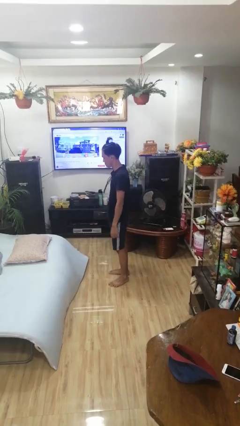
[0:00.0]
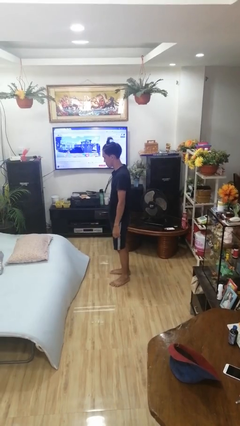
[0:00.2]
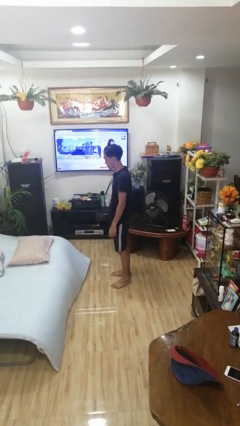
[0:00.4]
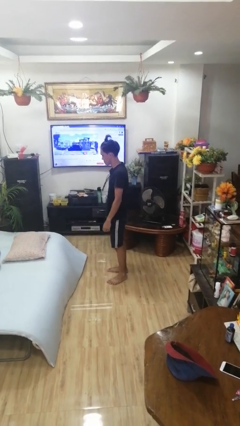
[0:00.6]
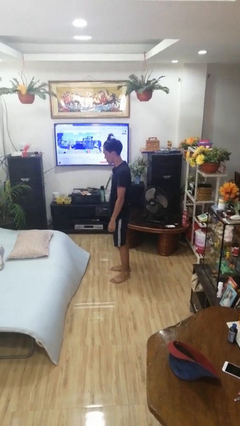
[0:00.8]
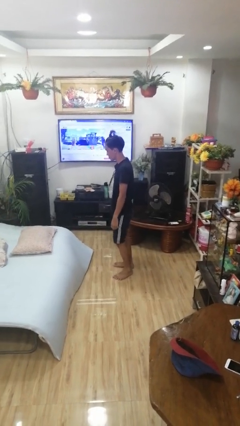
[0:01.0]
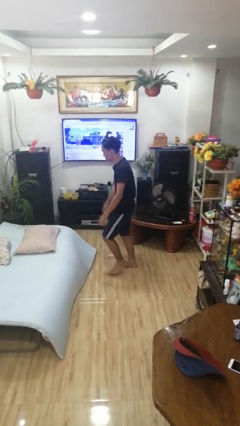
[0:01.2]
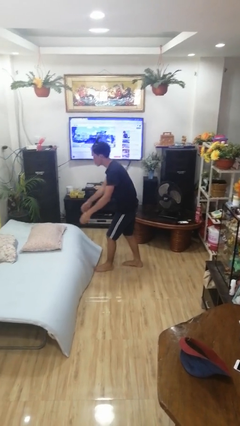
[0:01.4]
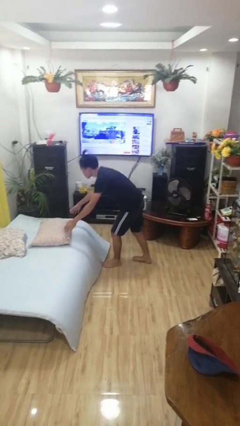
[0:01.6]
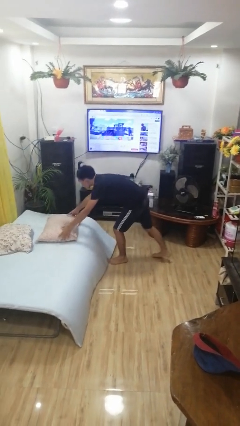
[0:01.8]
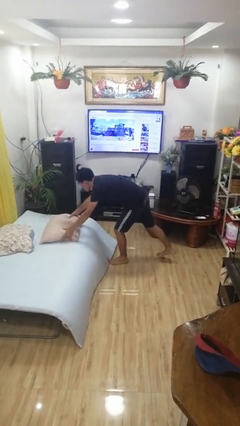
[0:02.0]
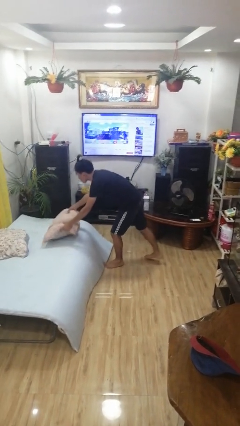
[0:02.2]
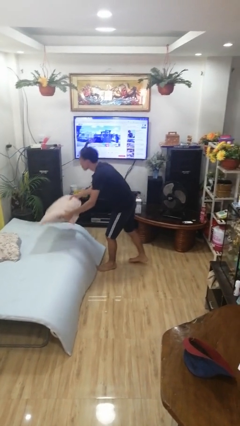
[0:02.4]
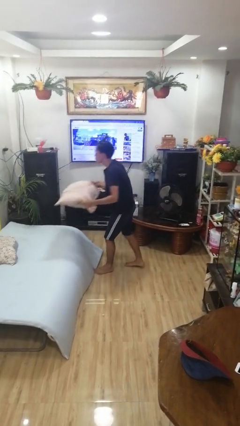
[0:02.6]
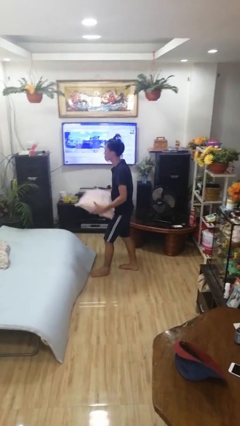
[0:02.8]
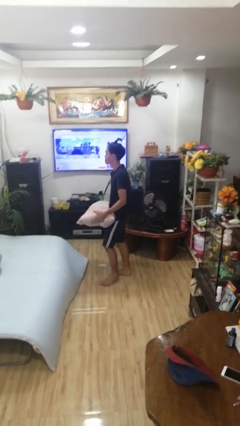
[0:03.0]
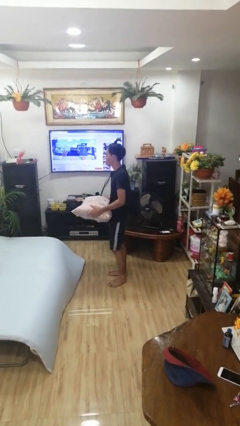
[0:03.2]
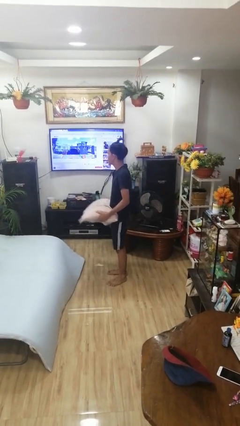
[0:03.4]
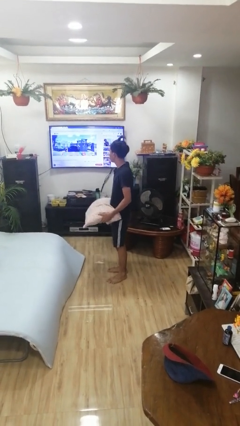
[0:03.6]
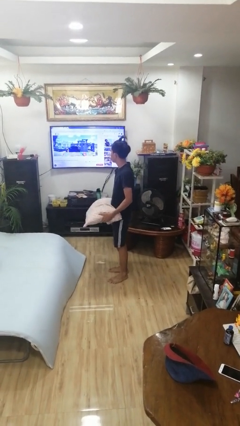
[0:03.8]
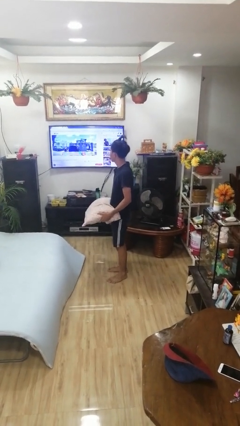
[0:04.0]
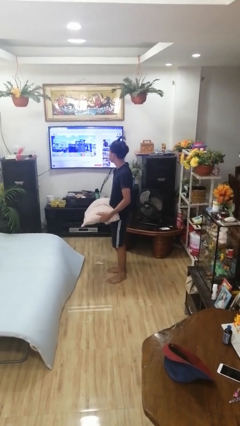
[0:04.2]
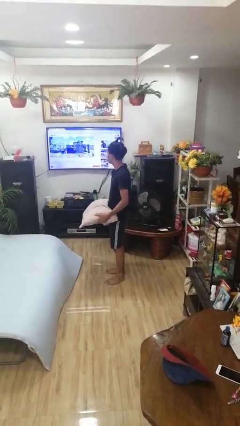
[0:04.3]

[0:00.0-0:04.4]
person picks up object from bed

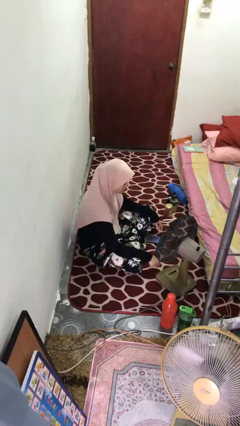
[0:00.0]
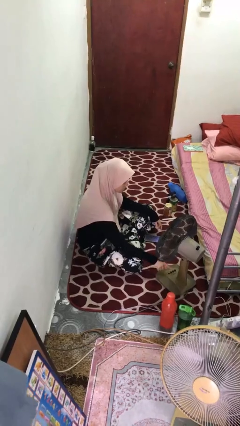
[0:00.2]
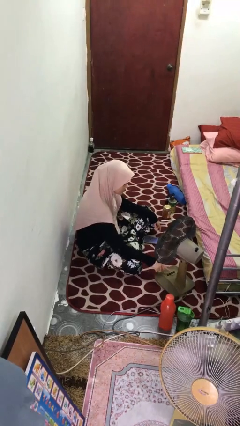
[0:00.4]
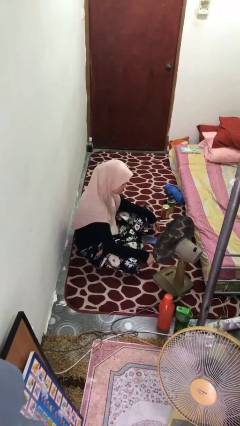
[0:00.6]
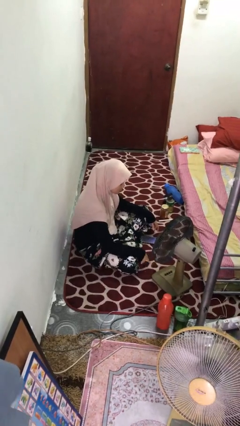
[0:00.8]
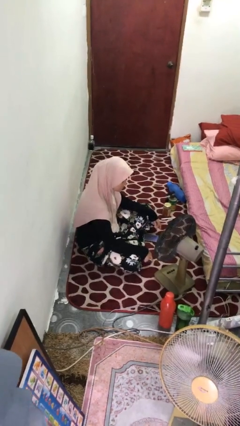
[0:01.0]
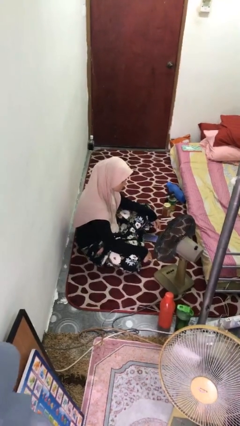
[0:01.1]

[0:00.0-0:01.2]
person turns on fan

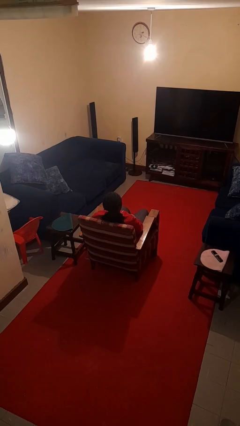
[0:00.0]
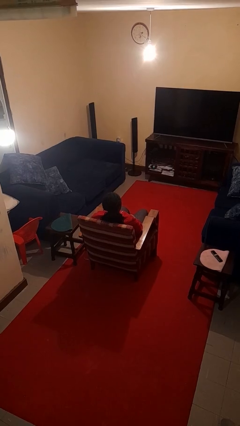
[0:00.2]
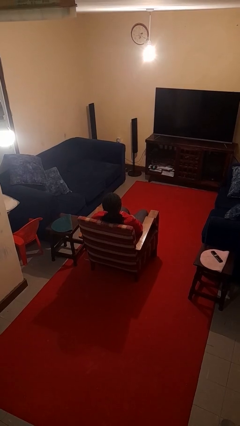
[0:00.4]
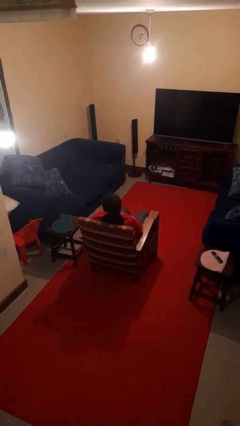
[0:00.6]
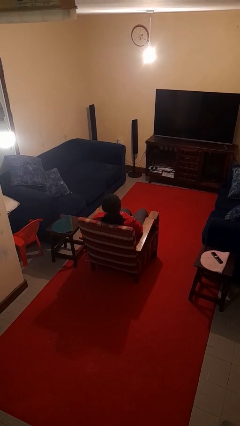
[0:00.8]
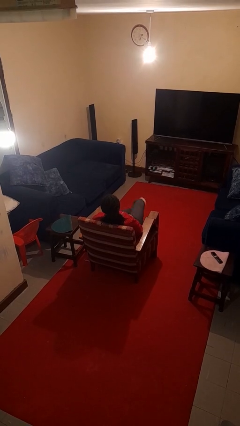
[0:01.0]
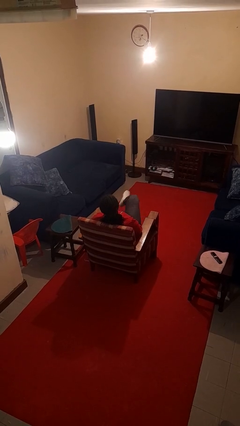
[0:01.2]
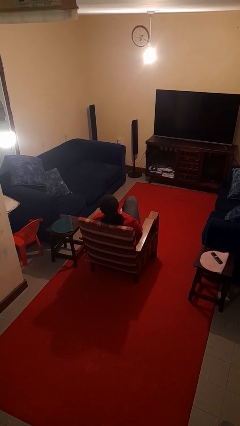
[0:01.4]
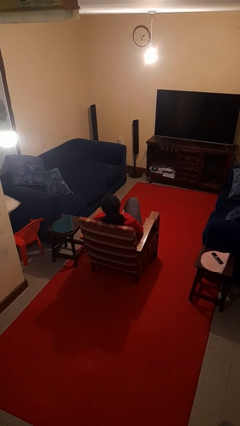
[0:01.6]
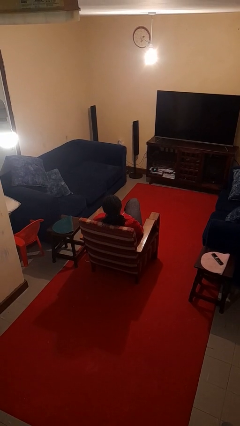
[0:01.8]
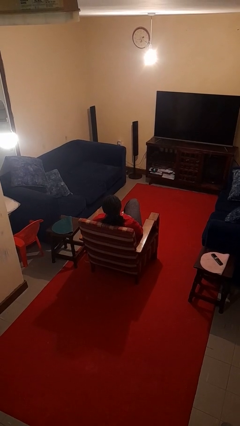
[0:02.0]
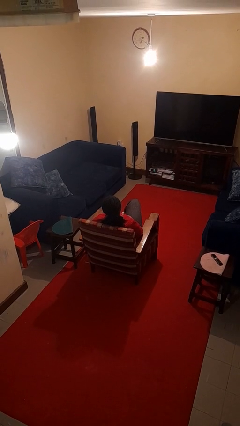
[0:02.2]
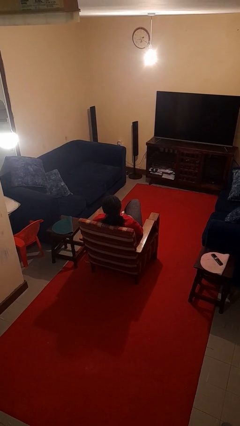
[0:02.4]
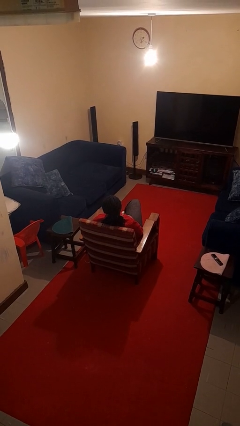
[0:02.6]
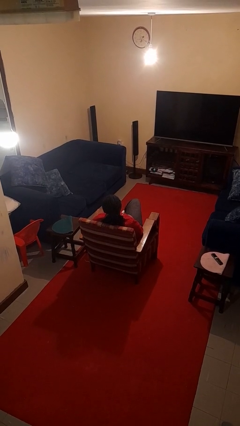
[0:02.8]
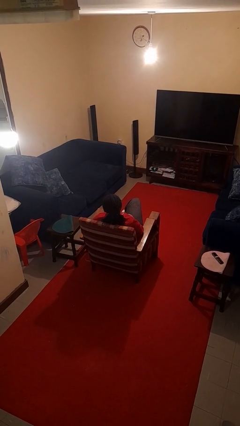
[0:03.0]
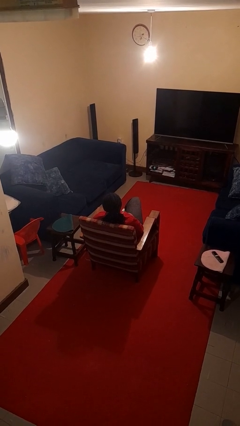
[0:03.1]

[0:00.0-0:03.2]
person crosses legs

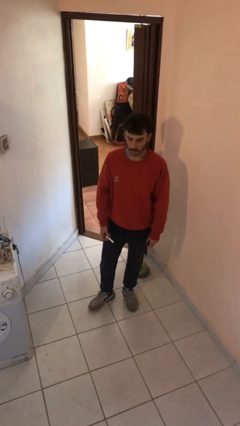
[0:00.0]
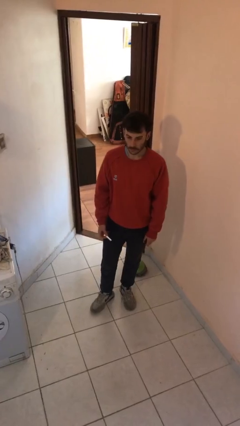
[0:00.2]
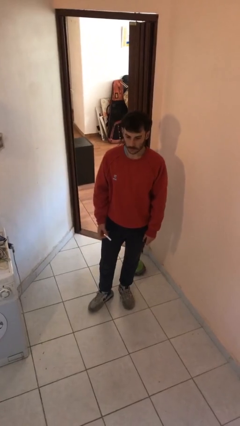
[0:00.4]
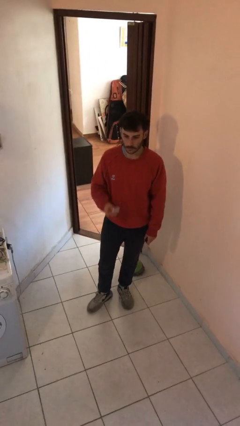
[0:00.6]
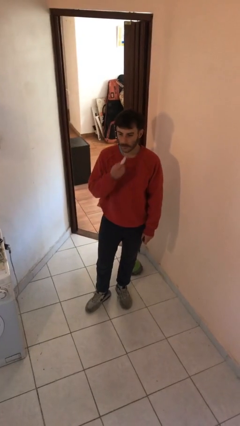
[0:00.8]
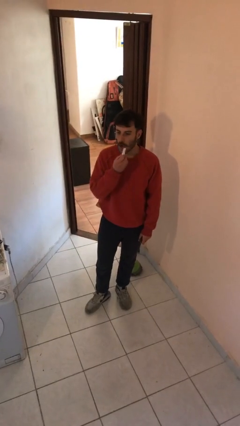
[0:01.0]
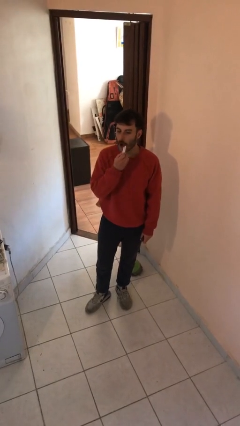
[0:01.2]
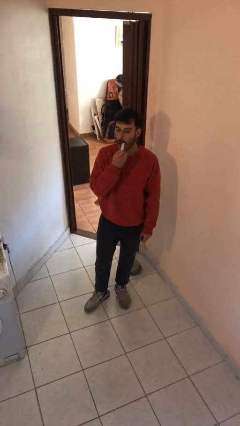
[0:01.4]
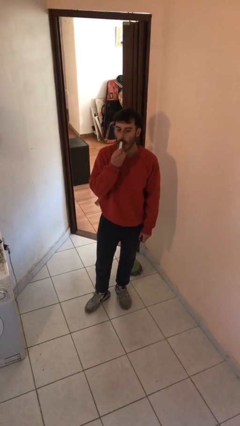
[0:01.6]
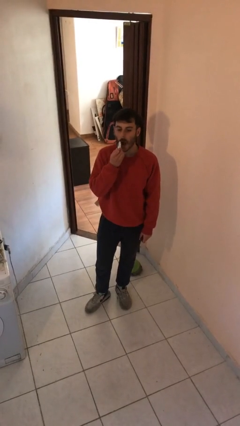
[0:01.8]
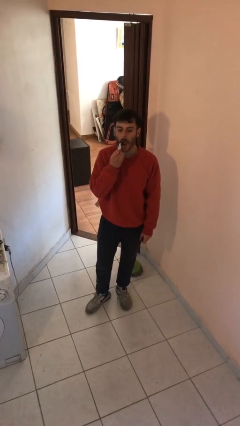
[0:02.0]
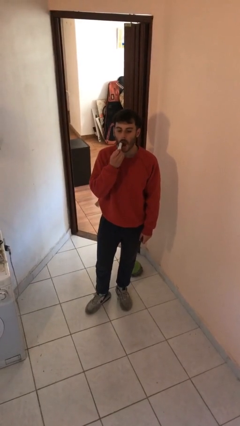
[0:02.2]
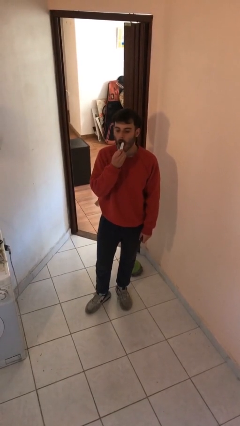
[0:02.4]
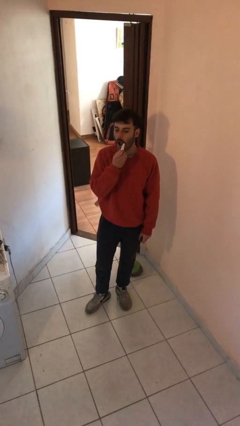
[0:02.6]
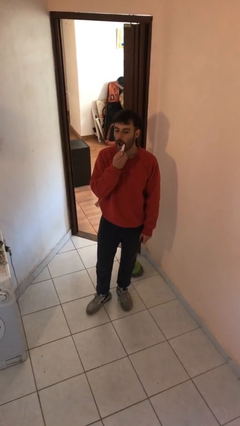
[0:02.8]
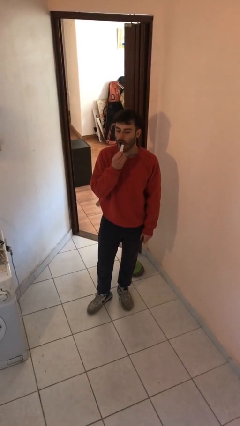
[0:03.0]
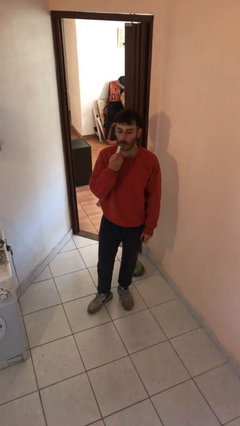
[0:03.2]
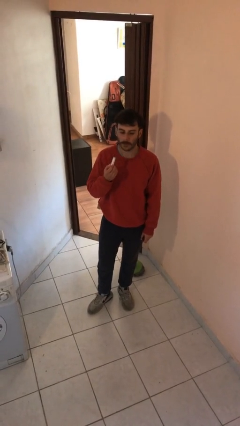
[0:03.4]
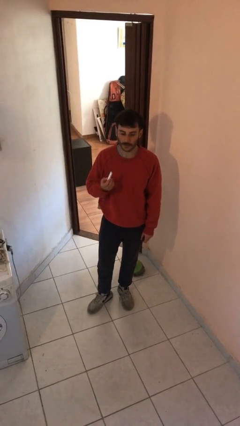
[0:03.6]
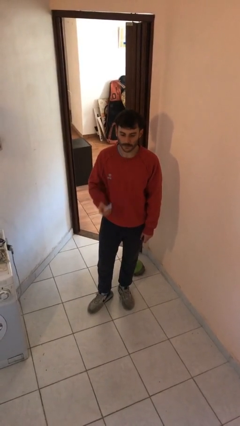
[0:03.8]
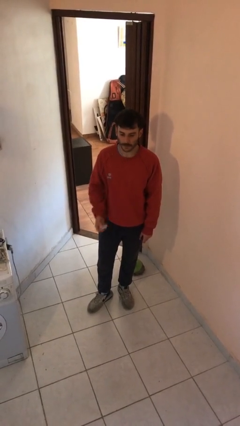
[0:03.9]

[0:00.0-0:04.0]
person applies lip makeup

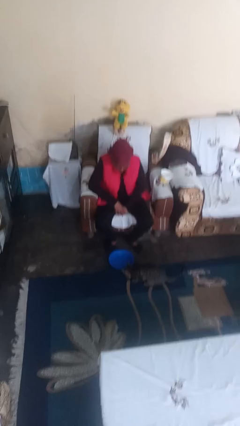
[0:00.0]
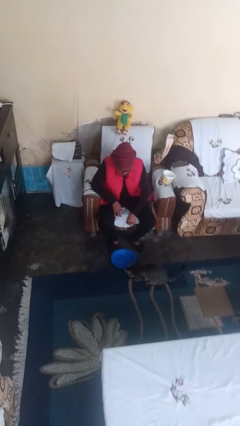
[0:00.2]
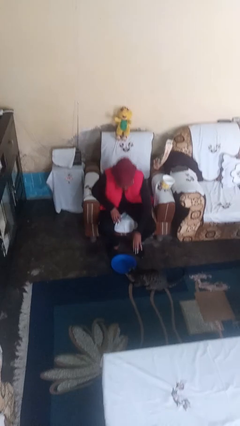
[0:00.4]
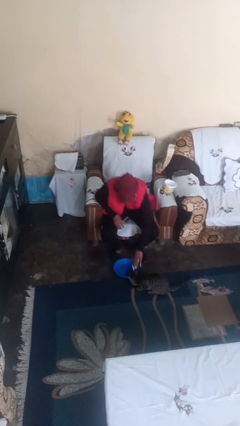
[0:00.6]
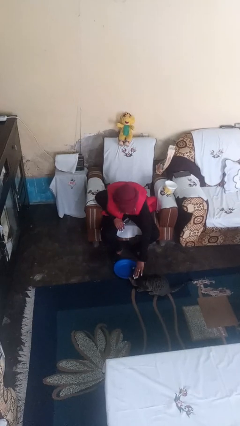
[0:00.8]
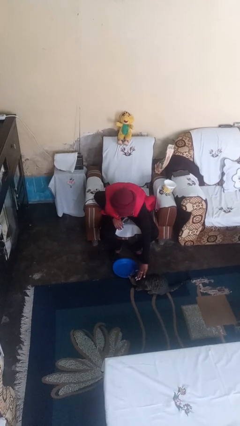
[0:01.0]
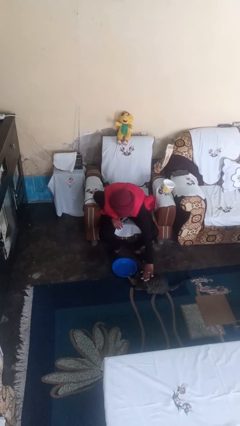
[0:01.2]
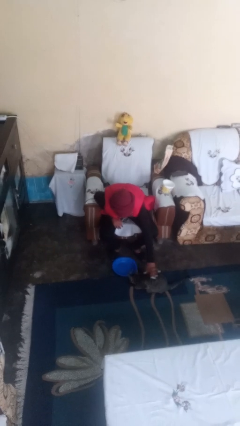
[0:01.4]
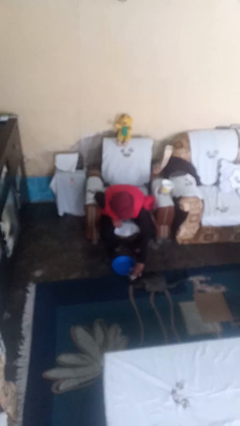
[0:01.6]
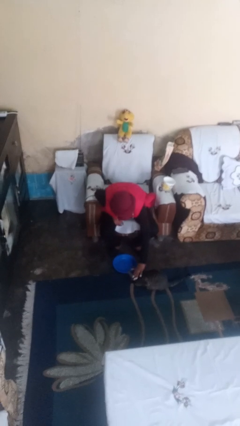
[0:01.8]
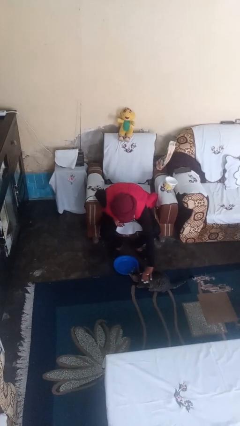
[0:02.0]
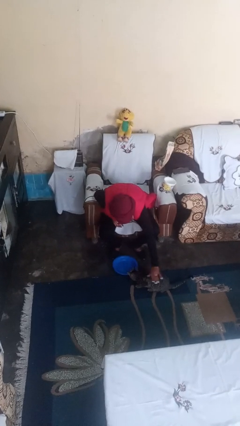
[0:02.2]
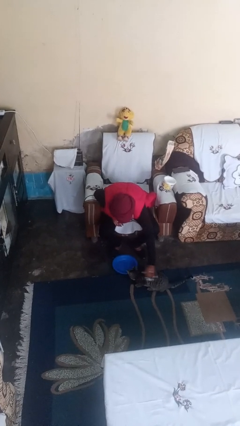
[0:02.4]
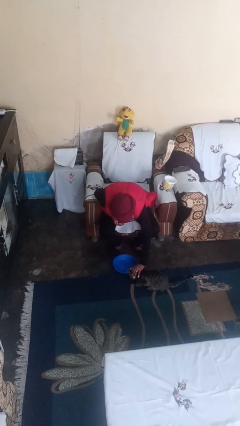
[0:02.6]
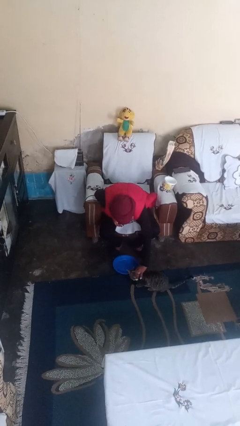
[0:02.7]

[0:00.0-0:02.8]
person pets cat

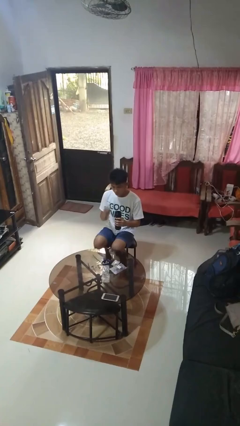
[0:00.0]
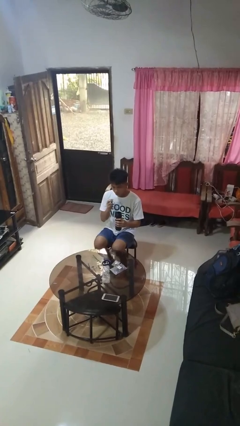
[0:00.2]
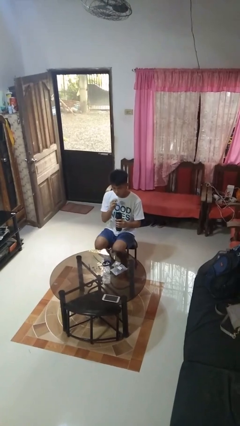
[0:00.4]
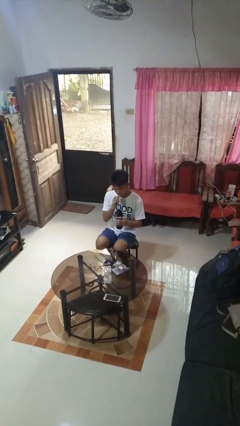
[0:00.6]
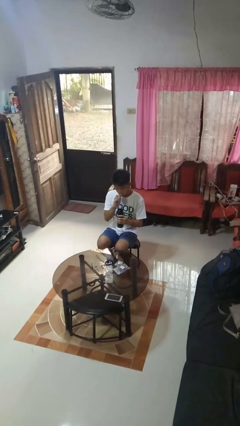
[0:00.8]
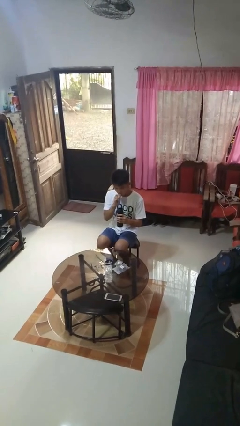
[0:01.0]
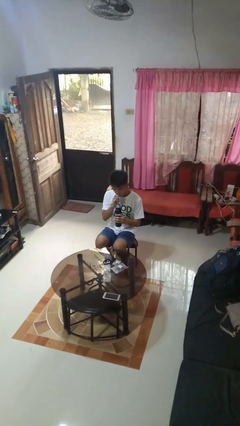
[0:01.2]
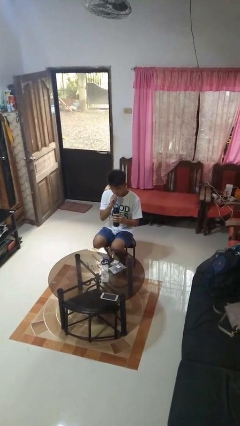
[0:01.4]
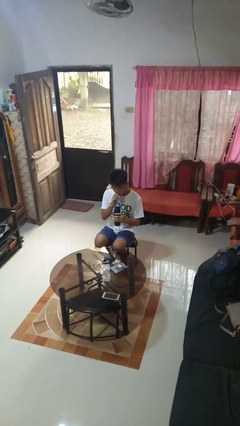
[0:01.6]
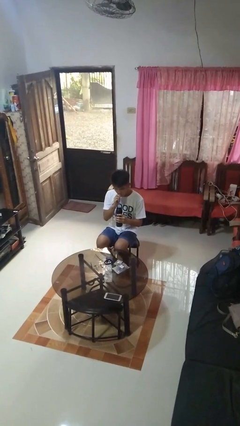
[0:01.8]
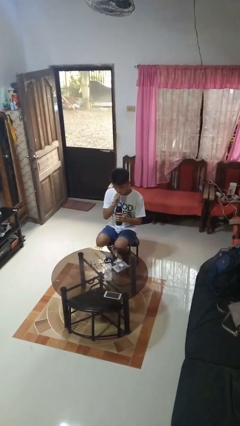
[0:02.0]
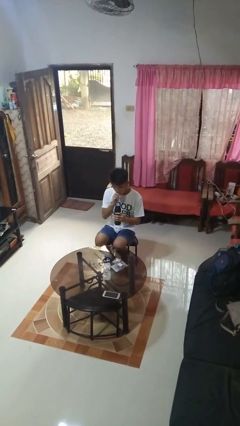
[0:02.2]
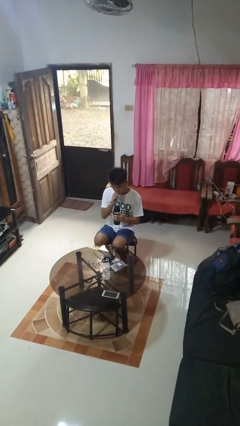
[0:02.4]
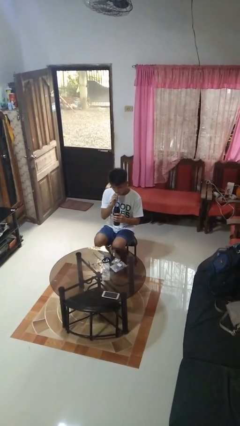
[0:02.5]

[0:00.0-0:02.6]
person drinks from straw
